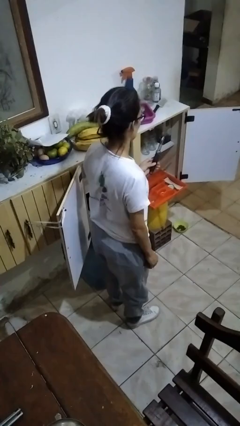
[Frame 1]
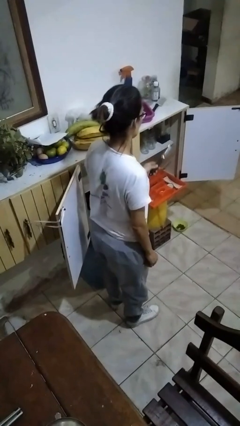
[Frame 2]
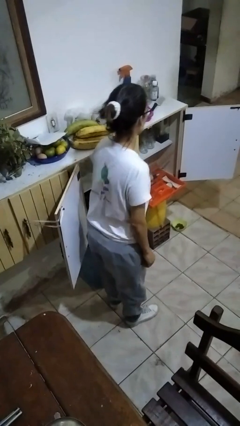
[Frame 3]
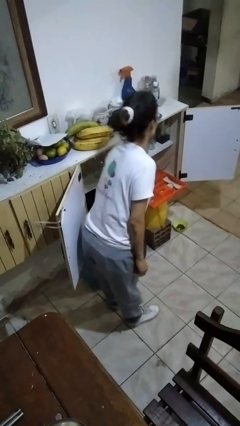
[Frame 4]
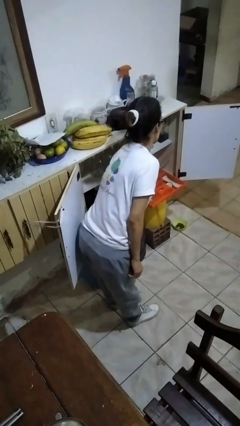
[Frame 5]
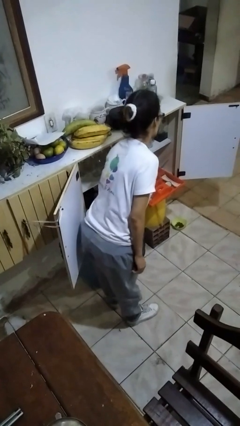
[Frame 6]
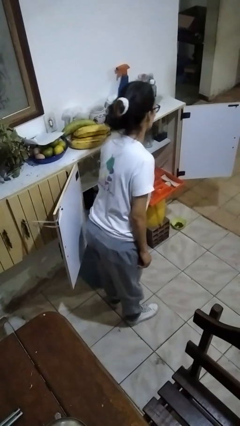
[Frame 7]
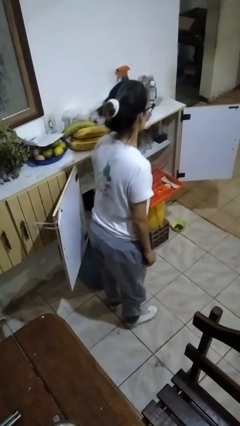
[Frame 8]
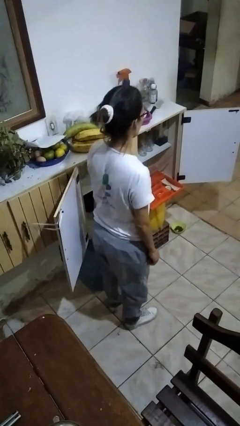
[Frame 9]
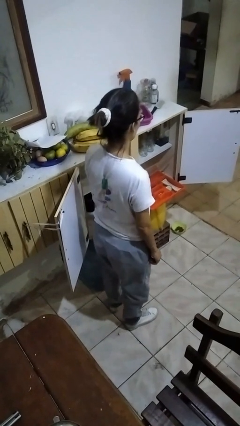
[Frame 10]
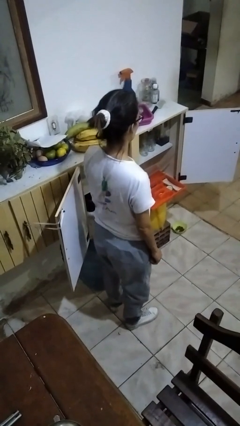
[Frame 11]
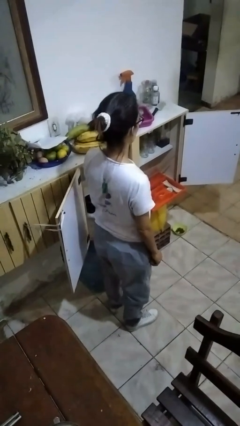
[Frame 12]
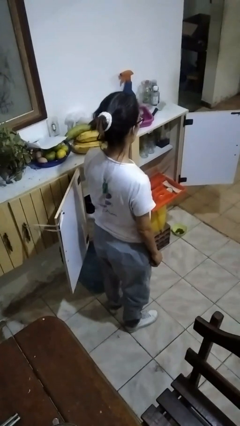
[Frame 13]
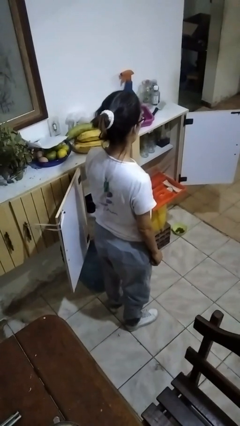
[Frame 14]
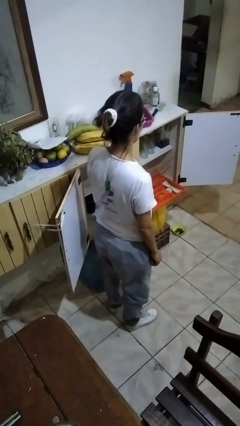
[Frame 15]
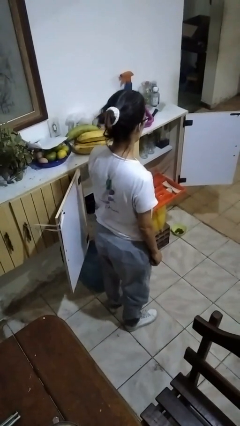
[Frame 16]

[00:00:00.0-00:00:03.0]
person puts object into kitchen drawer

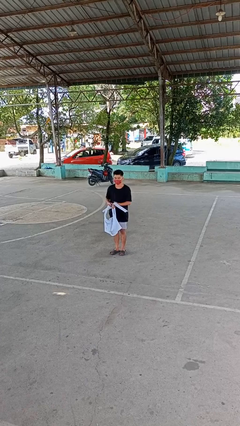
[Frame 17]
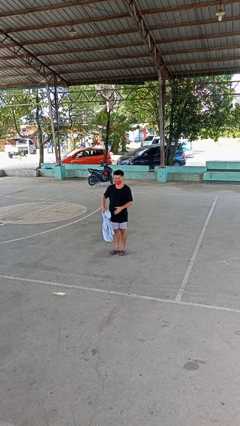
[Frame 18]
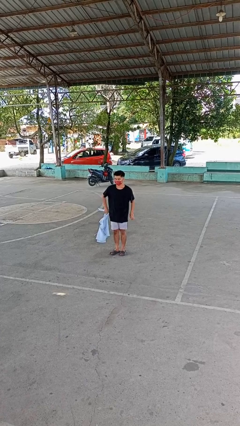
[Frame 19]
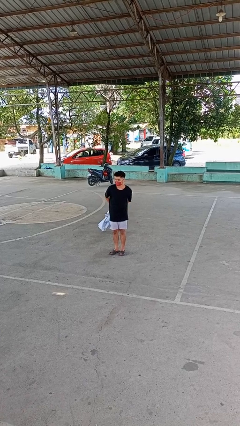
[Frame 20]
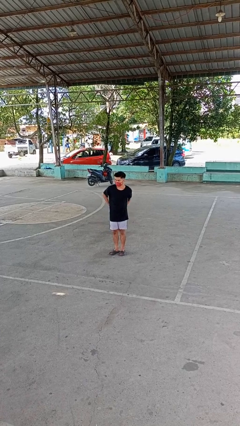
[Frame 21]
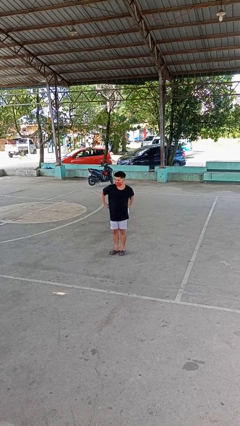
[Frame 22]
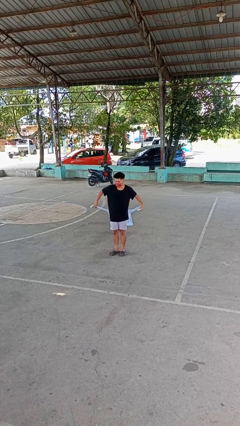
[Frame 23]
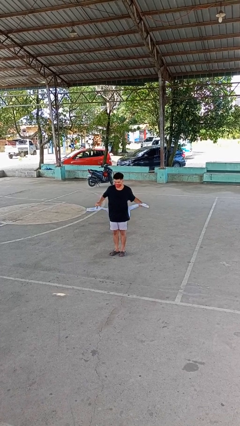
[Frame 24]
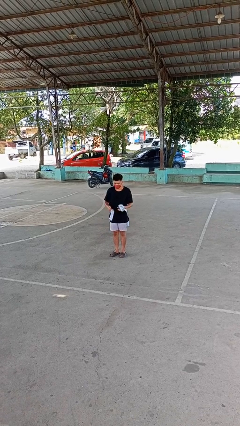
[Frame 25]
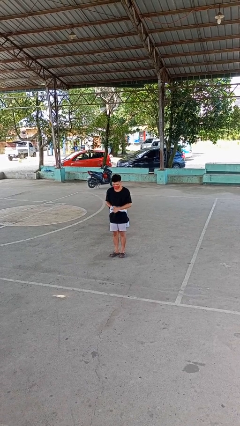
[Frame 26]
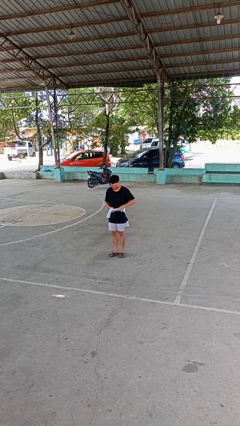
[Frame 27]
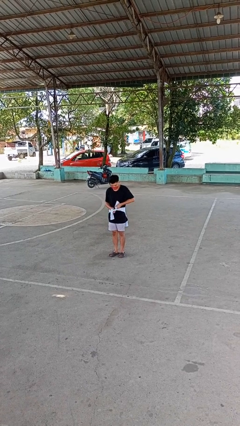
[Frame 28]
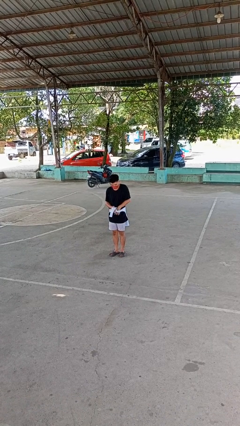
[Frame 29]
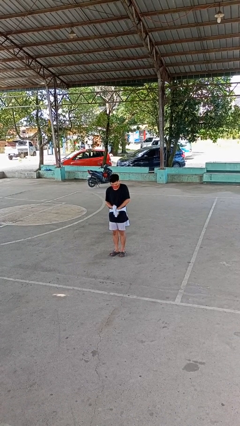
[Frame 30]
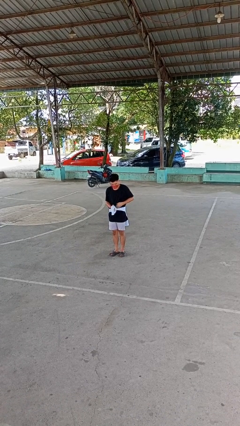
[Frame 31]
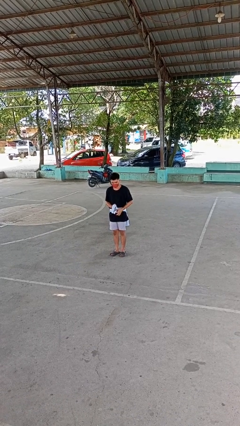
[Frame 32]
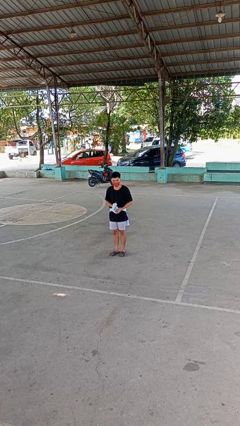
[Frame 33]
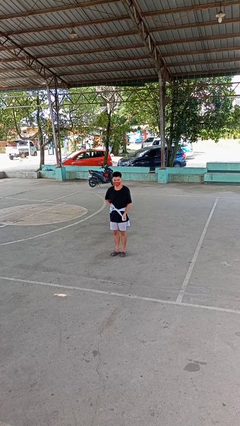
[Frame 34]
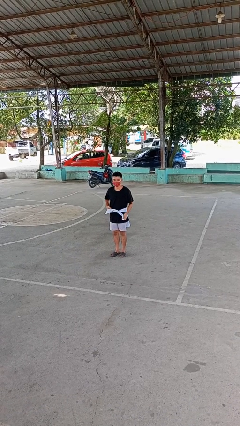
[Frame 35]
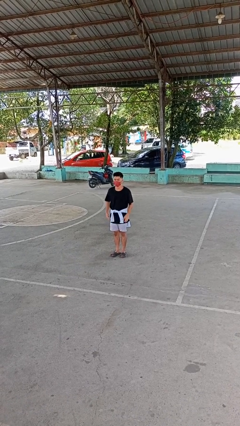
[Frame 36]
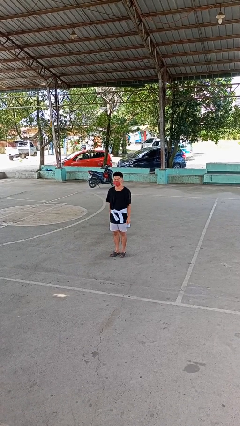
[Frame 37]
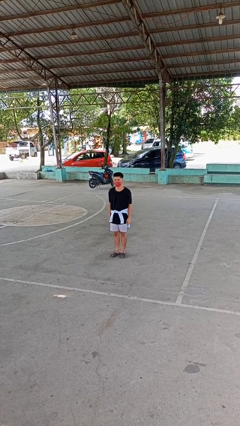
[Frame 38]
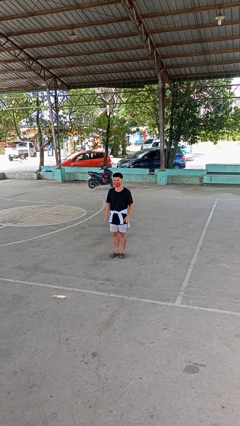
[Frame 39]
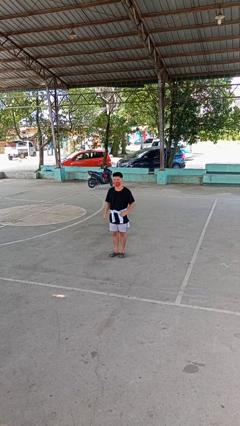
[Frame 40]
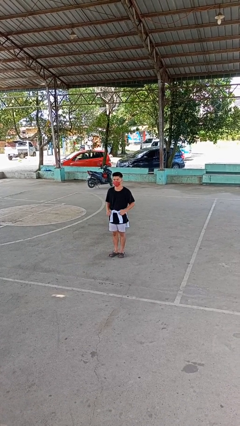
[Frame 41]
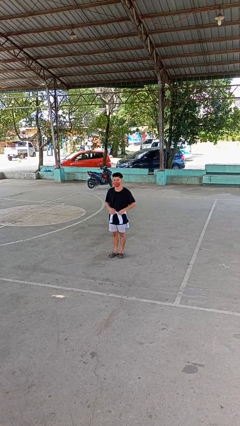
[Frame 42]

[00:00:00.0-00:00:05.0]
person ties jacket around waist

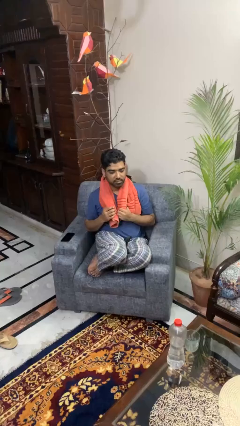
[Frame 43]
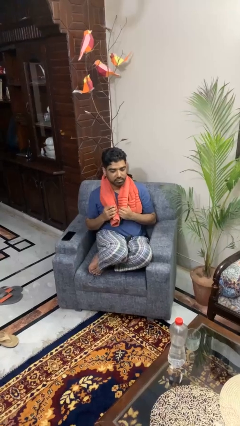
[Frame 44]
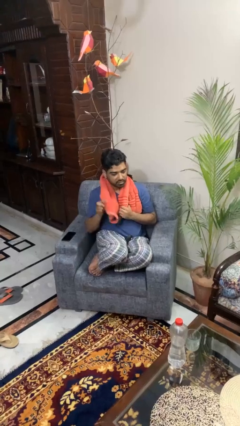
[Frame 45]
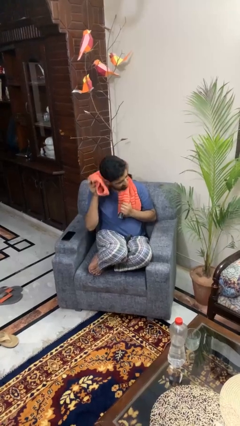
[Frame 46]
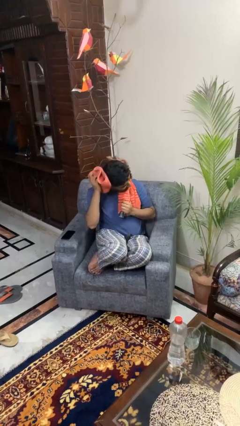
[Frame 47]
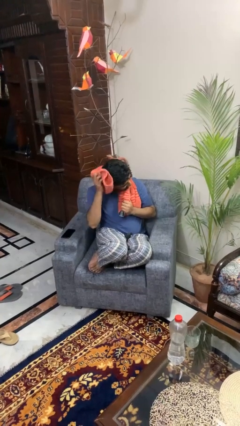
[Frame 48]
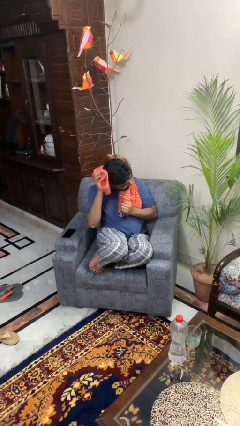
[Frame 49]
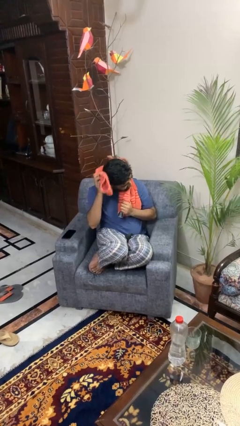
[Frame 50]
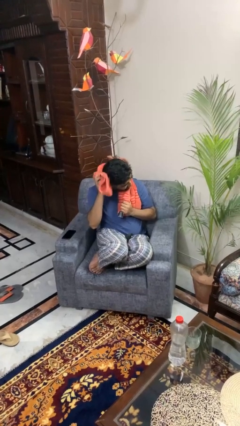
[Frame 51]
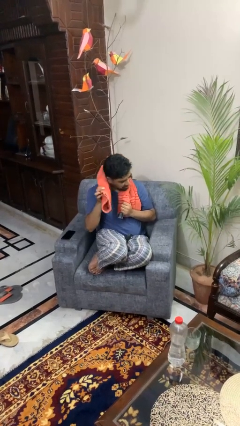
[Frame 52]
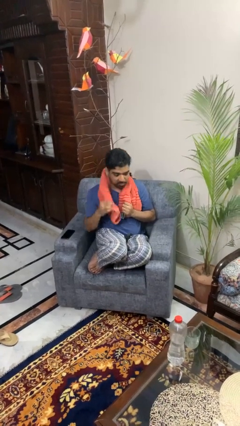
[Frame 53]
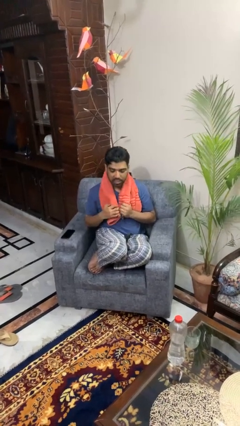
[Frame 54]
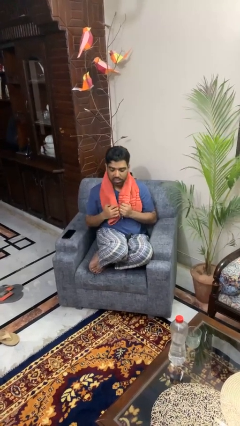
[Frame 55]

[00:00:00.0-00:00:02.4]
person dries hair with towel

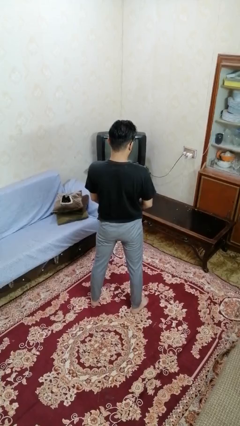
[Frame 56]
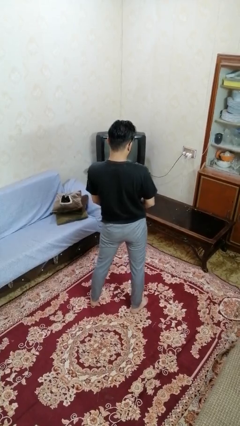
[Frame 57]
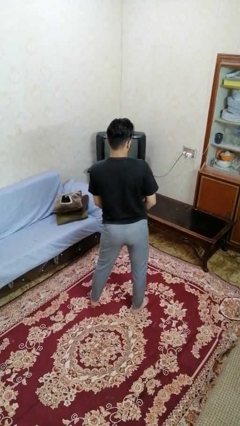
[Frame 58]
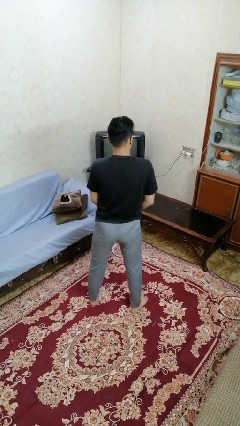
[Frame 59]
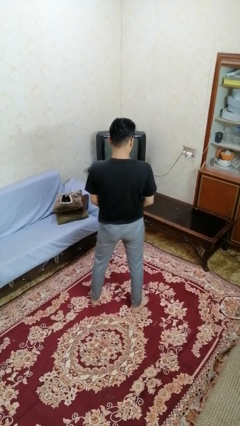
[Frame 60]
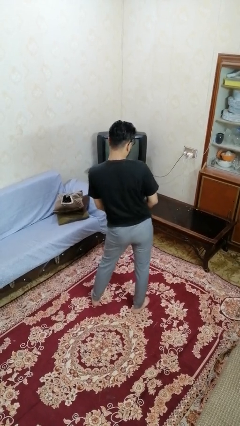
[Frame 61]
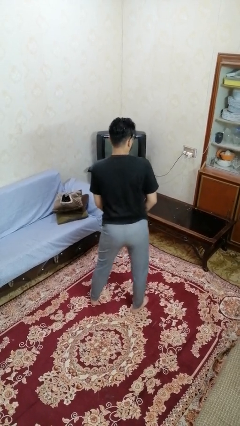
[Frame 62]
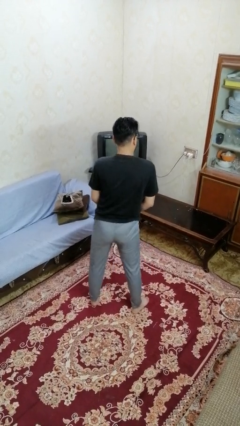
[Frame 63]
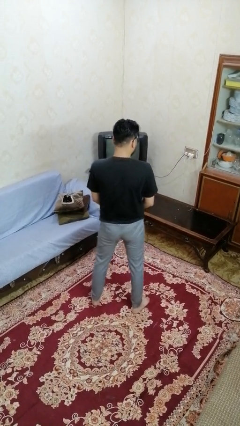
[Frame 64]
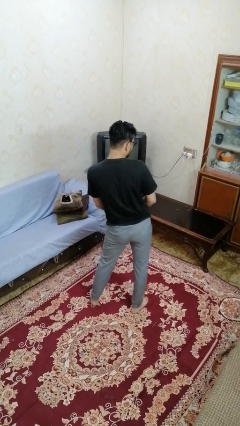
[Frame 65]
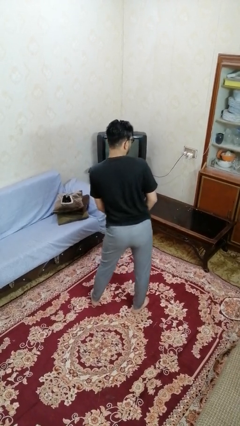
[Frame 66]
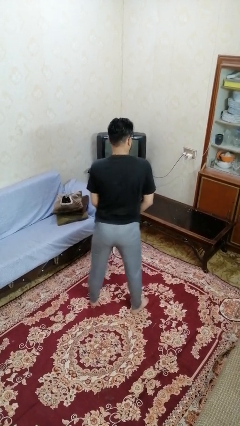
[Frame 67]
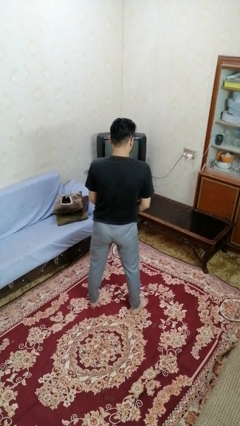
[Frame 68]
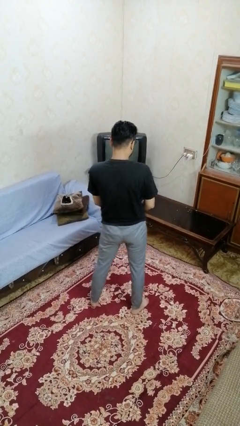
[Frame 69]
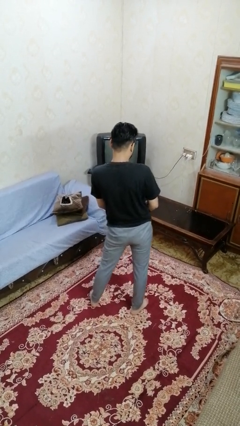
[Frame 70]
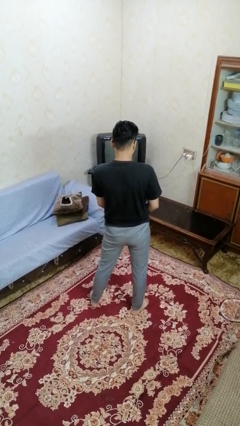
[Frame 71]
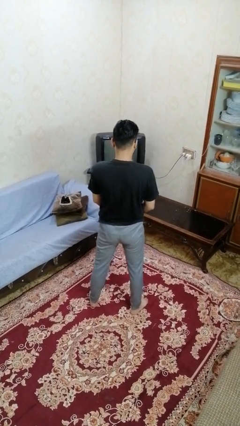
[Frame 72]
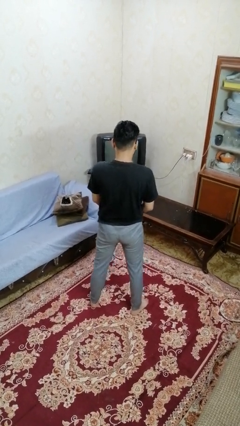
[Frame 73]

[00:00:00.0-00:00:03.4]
person wiggles hips

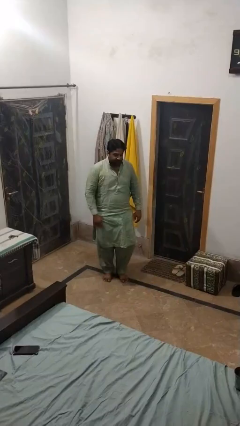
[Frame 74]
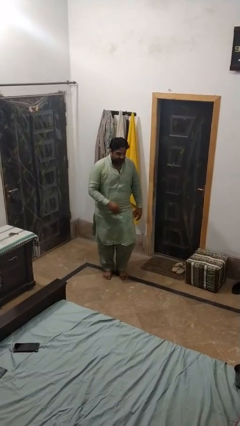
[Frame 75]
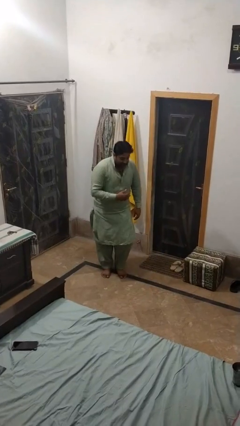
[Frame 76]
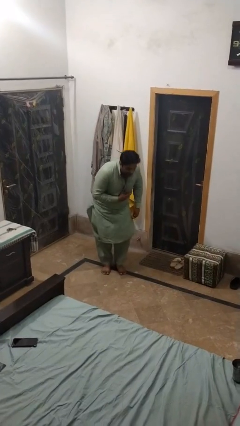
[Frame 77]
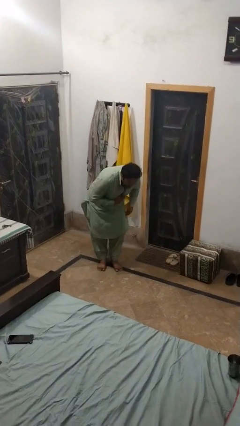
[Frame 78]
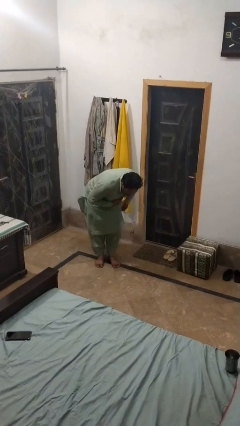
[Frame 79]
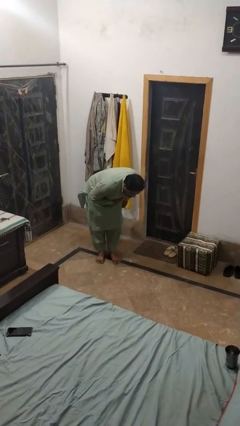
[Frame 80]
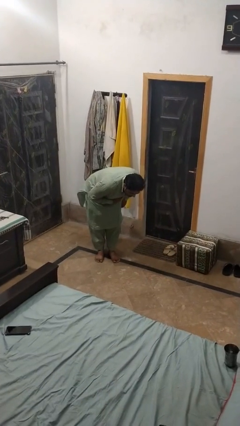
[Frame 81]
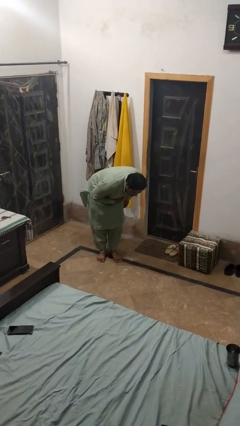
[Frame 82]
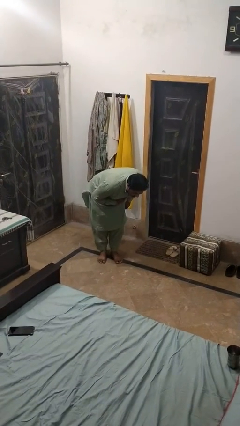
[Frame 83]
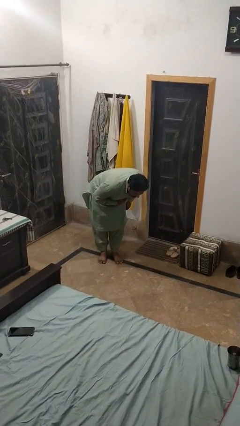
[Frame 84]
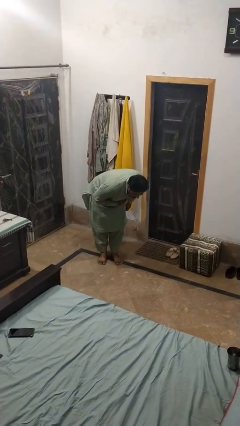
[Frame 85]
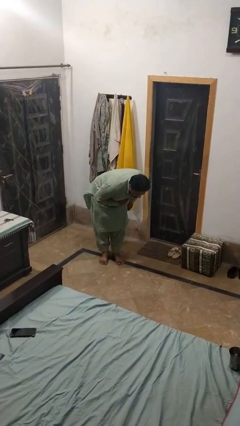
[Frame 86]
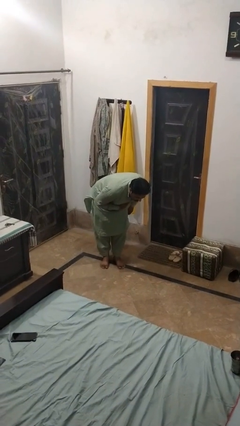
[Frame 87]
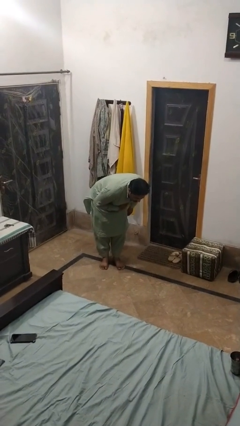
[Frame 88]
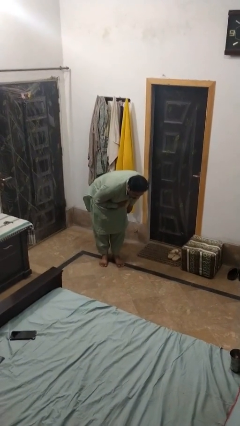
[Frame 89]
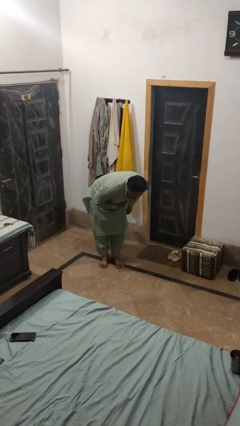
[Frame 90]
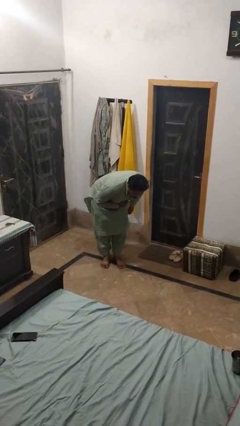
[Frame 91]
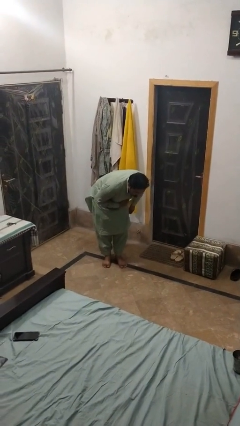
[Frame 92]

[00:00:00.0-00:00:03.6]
person bows

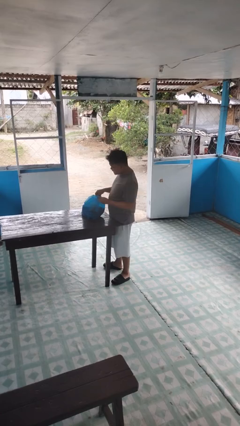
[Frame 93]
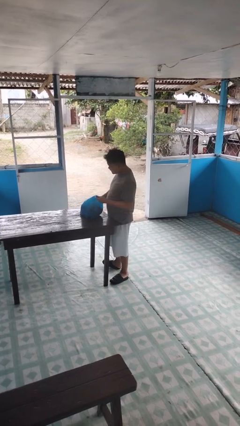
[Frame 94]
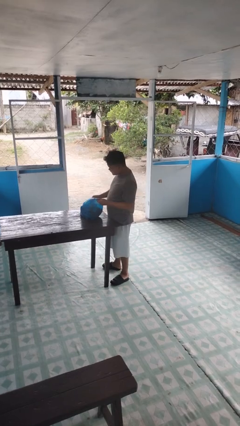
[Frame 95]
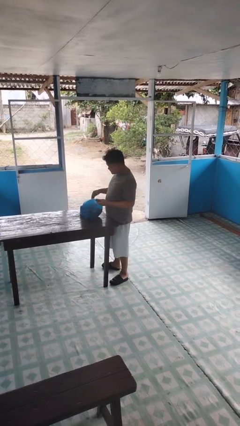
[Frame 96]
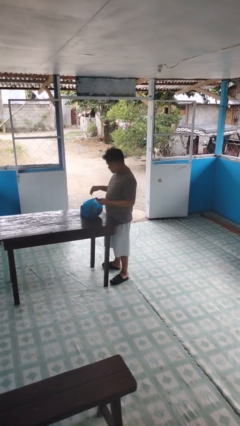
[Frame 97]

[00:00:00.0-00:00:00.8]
person puts object into bag
